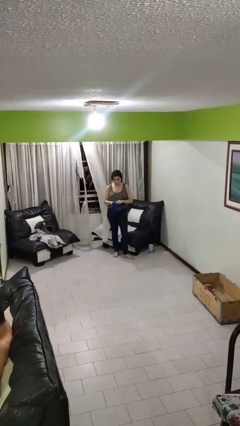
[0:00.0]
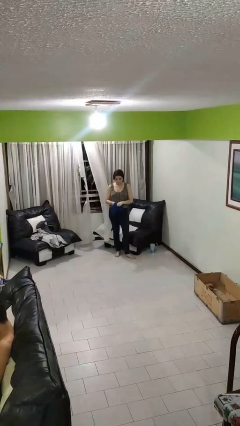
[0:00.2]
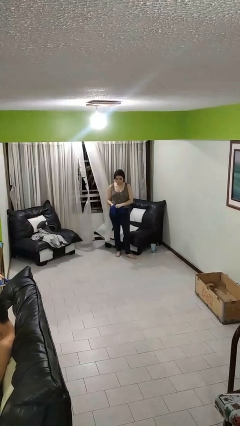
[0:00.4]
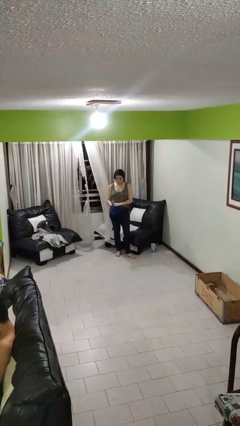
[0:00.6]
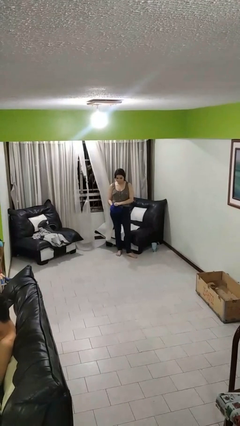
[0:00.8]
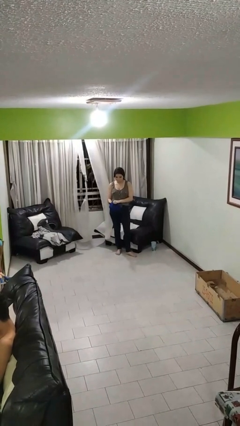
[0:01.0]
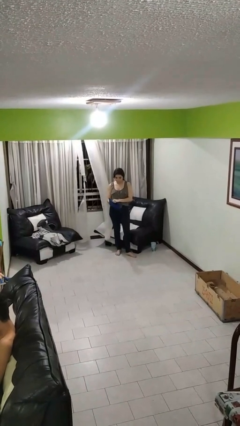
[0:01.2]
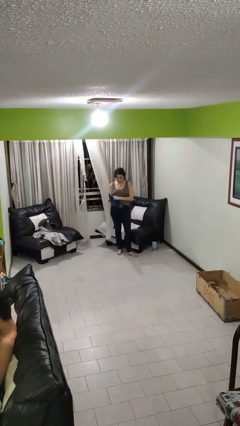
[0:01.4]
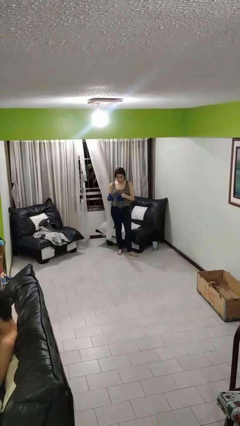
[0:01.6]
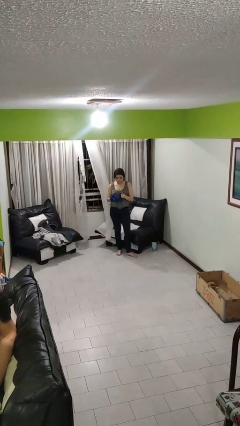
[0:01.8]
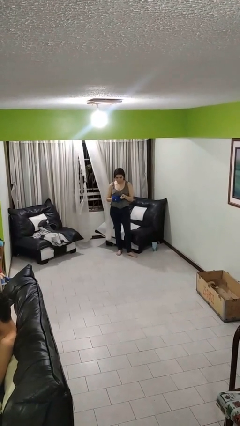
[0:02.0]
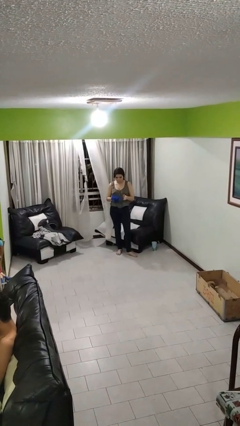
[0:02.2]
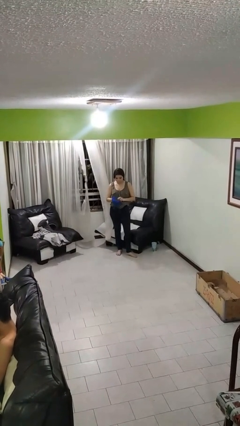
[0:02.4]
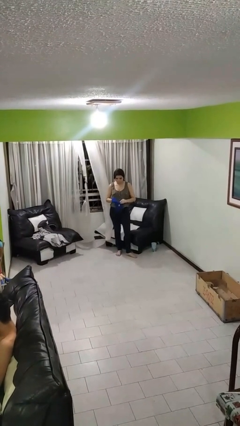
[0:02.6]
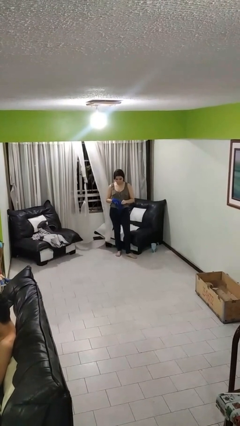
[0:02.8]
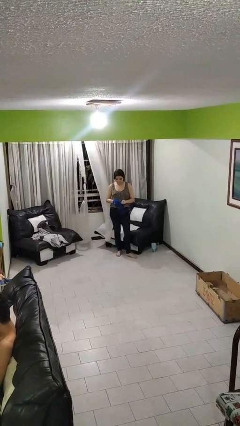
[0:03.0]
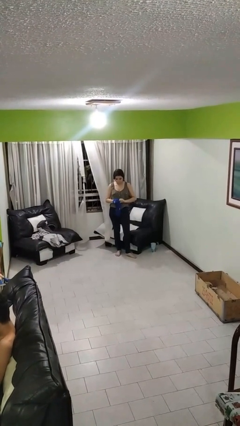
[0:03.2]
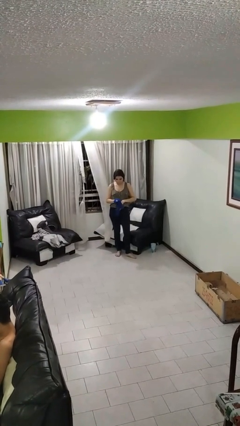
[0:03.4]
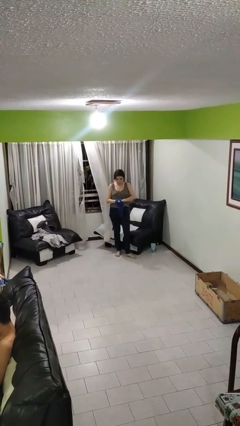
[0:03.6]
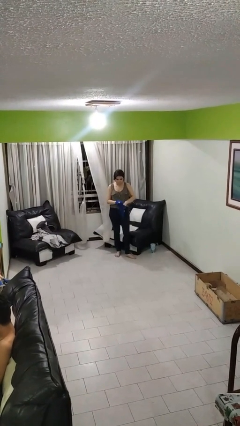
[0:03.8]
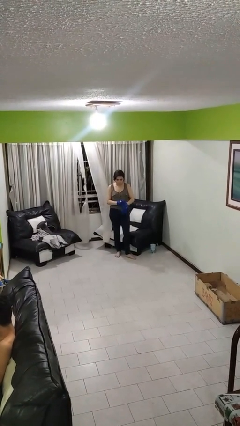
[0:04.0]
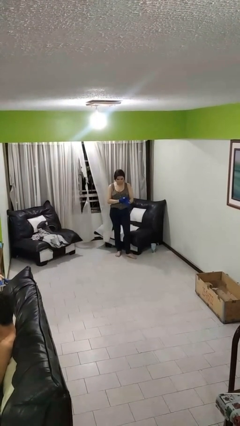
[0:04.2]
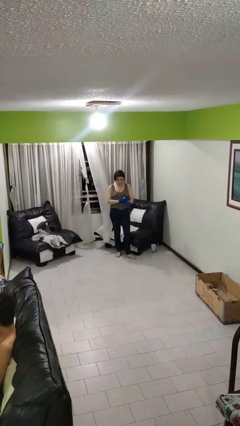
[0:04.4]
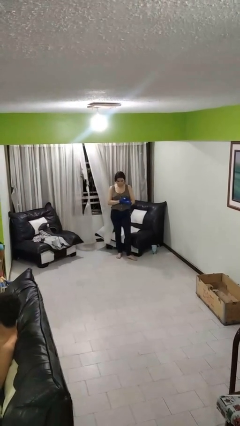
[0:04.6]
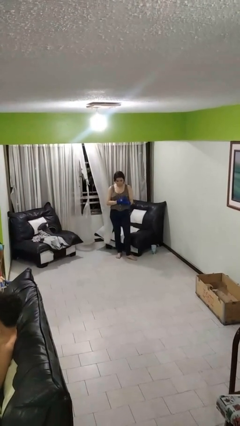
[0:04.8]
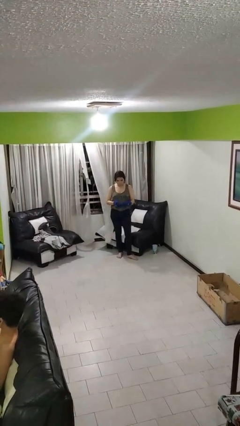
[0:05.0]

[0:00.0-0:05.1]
person puts on gloves

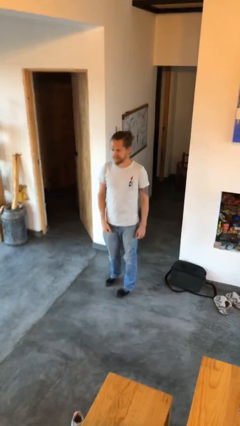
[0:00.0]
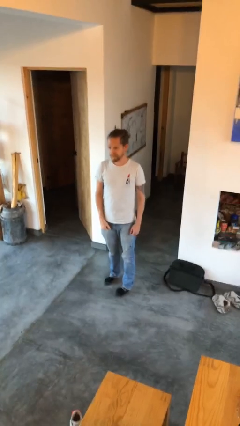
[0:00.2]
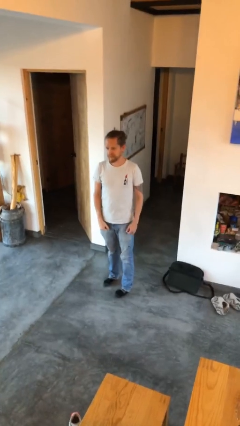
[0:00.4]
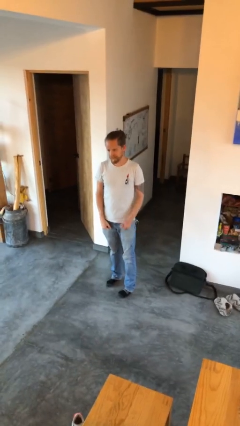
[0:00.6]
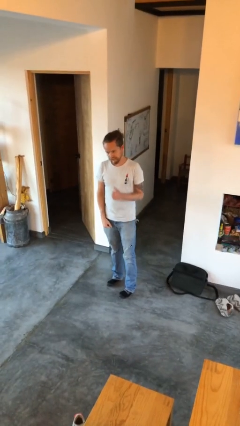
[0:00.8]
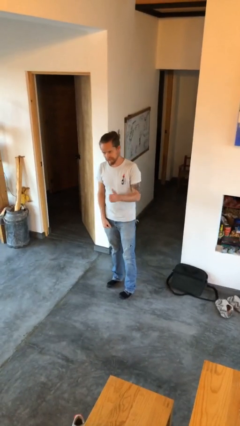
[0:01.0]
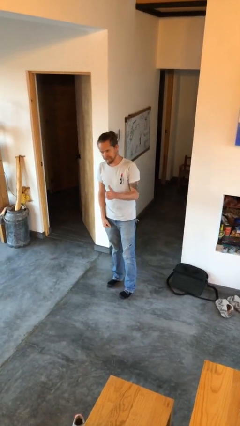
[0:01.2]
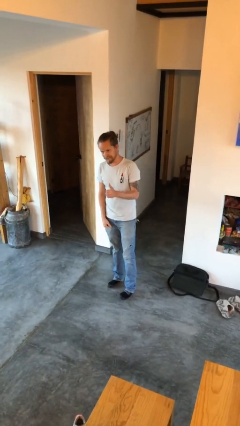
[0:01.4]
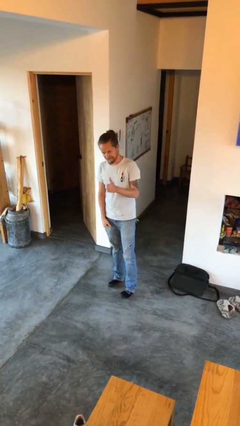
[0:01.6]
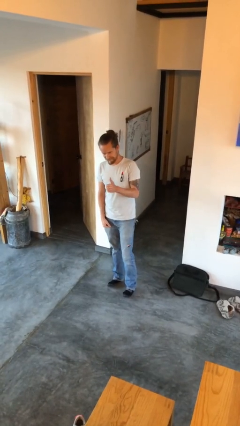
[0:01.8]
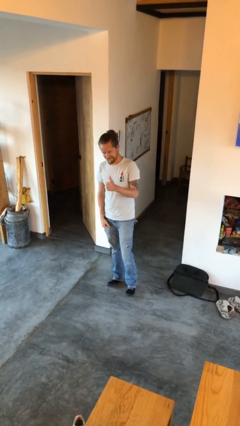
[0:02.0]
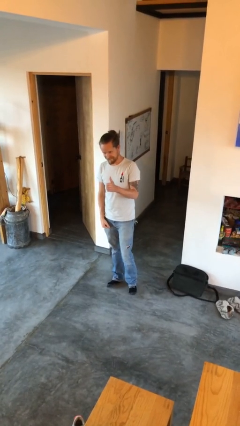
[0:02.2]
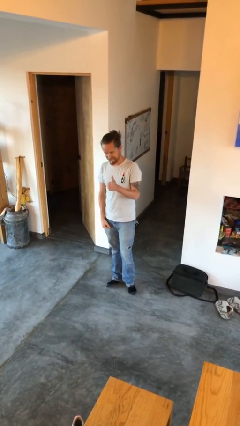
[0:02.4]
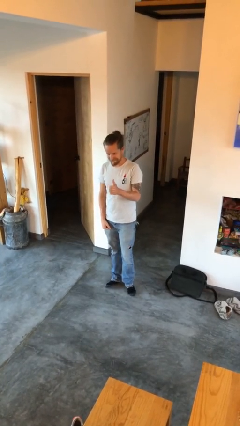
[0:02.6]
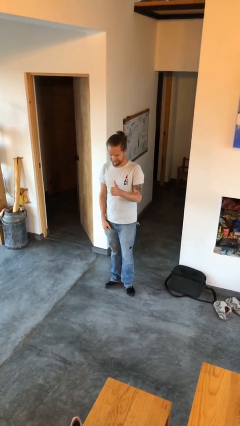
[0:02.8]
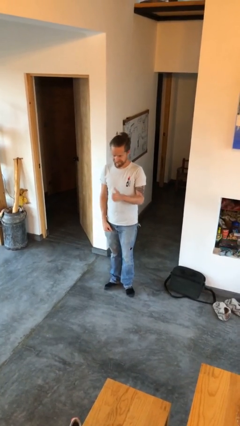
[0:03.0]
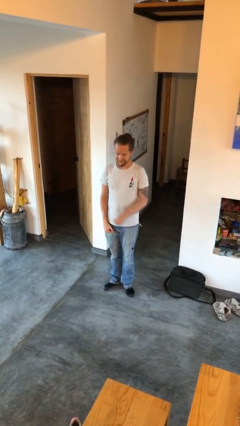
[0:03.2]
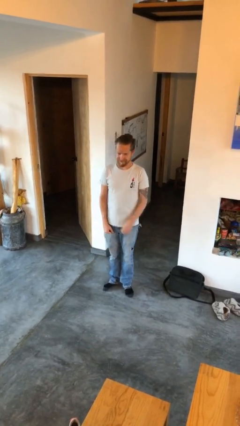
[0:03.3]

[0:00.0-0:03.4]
person gestures thumbs up

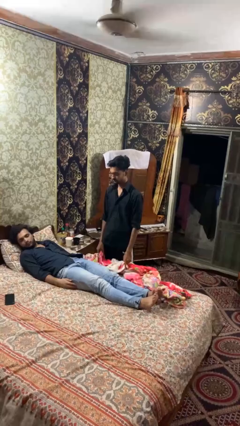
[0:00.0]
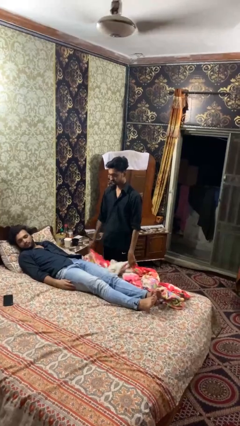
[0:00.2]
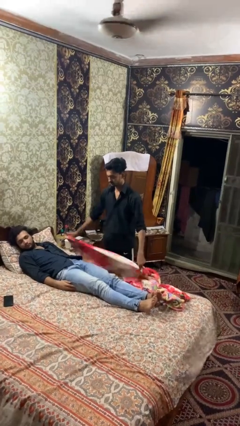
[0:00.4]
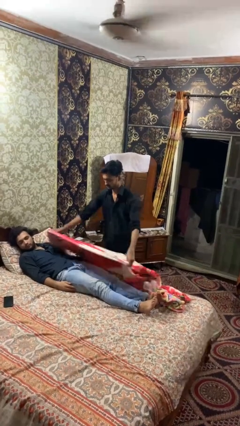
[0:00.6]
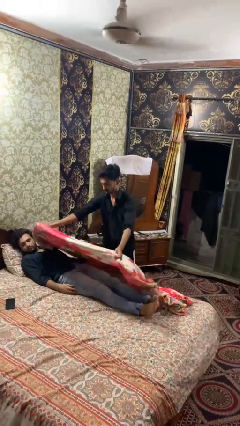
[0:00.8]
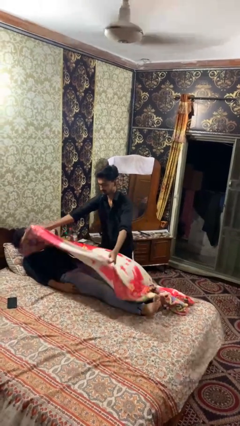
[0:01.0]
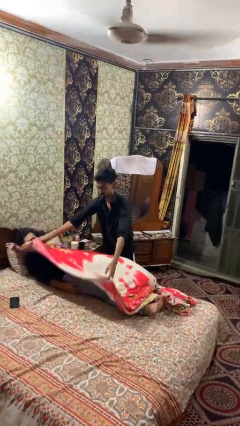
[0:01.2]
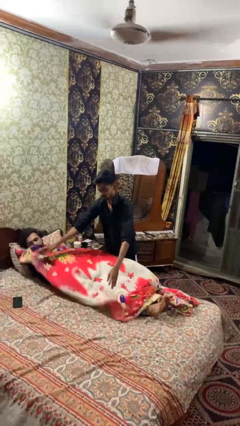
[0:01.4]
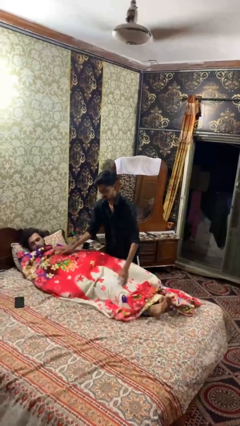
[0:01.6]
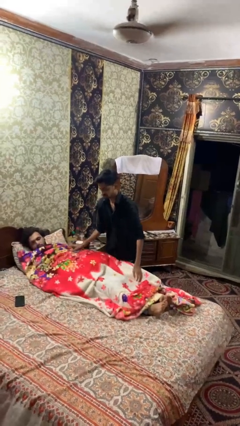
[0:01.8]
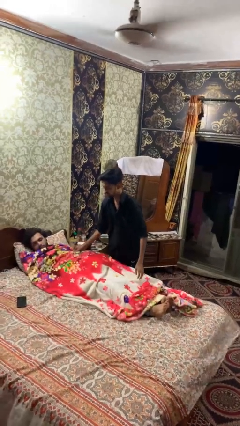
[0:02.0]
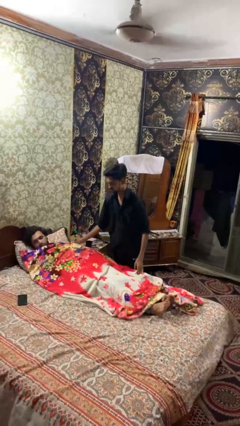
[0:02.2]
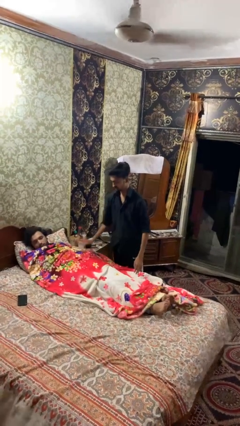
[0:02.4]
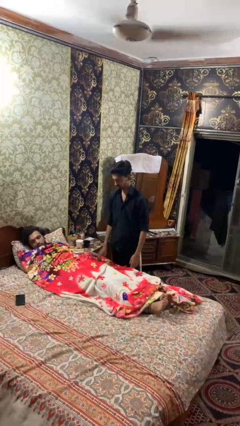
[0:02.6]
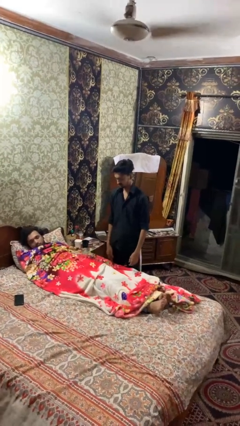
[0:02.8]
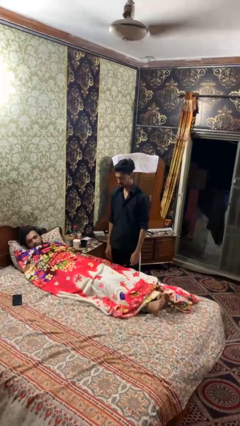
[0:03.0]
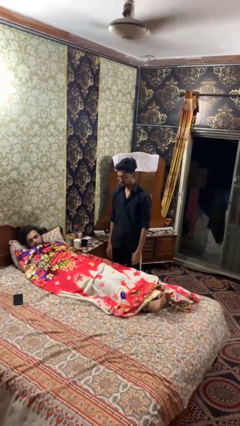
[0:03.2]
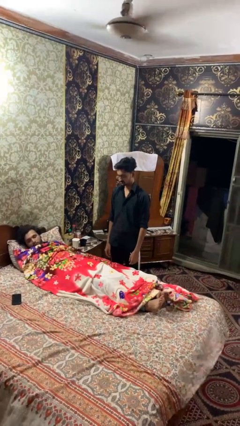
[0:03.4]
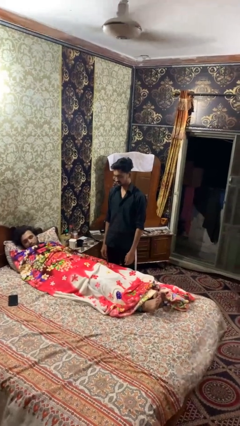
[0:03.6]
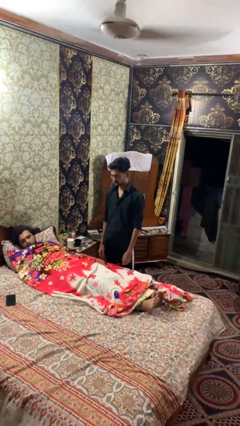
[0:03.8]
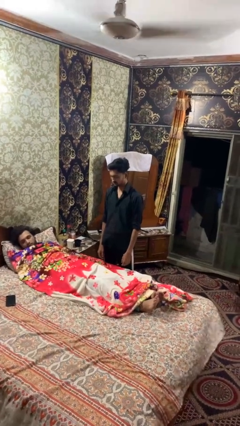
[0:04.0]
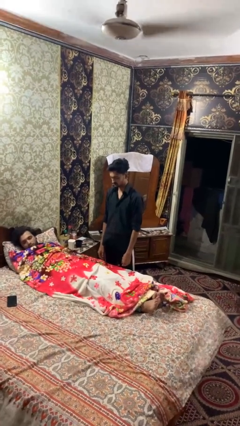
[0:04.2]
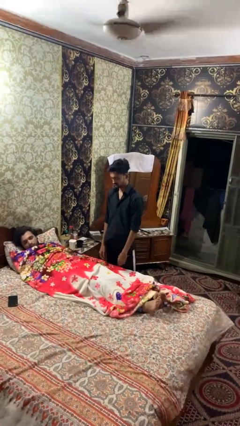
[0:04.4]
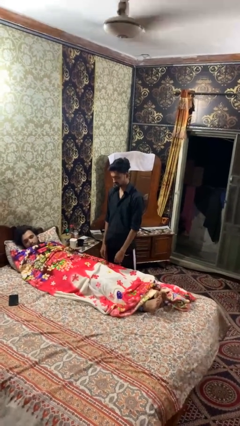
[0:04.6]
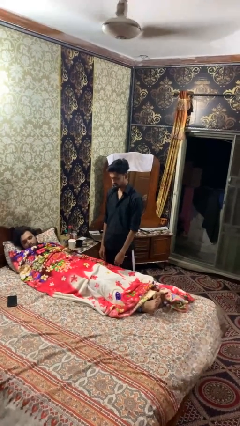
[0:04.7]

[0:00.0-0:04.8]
person covers friend with blanket

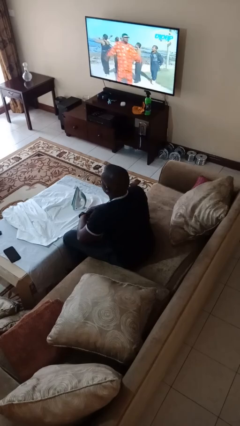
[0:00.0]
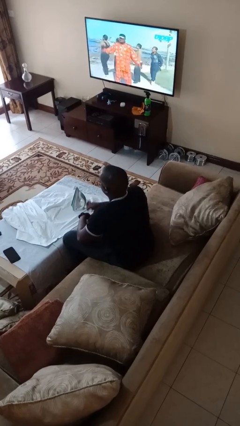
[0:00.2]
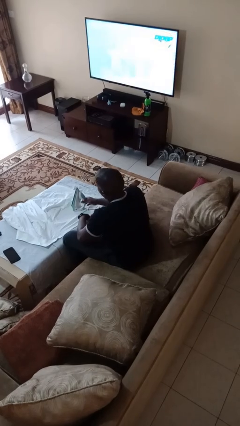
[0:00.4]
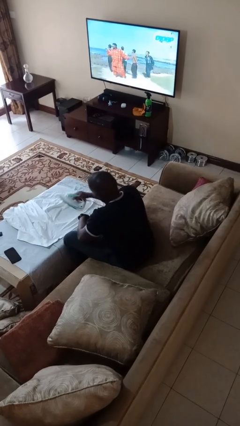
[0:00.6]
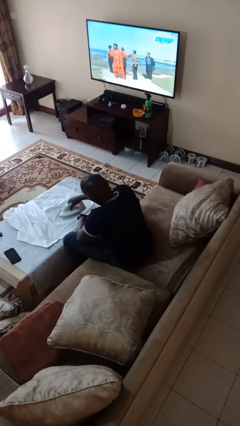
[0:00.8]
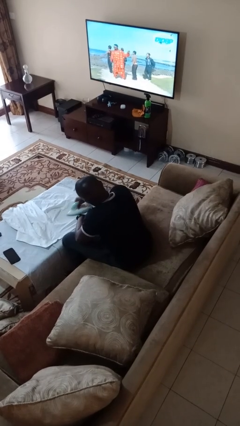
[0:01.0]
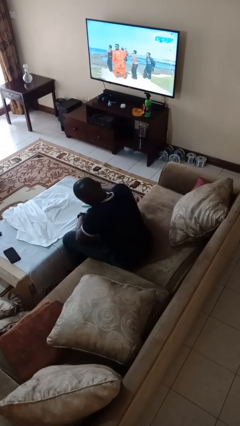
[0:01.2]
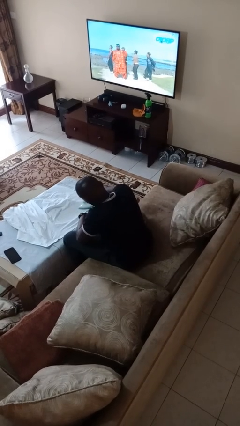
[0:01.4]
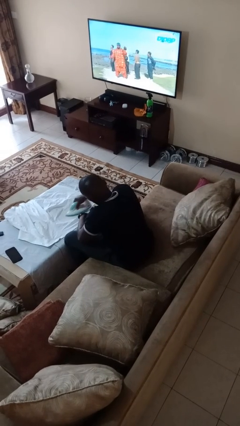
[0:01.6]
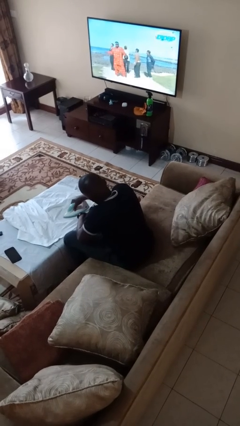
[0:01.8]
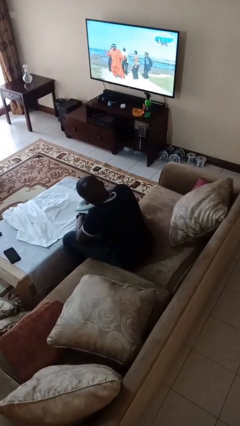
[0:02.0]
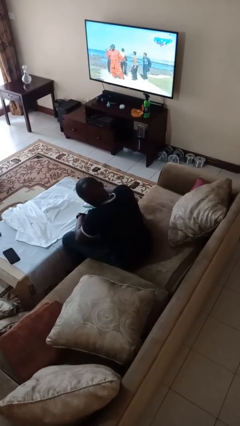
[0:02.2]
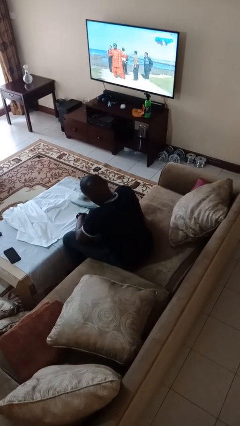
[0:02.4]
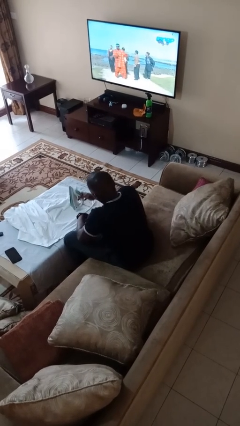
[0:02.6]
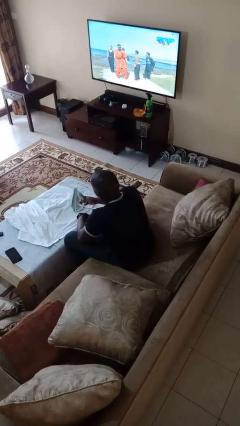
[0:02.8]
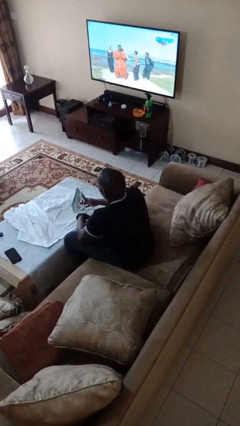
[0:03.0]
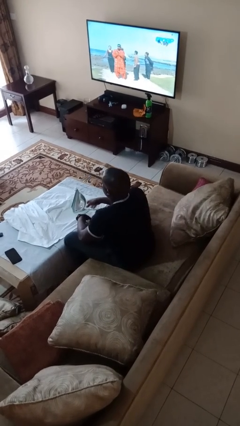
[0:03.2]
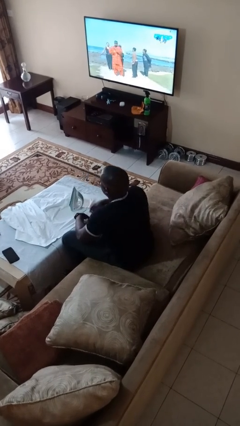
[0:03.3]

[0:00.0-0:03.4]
person irons clothes

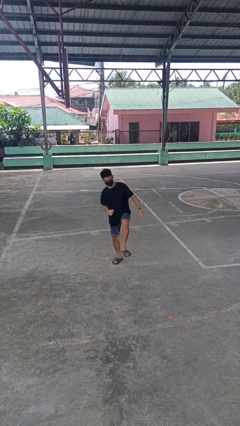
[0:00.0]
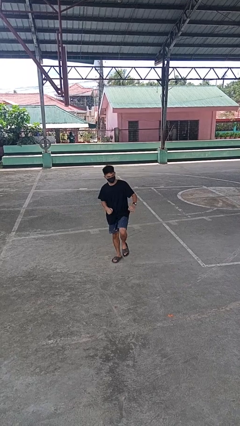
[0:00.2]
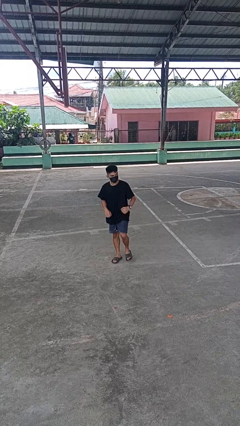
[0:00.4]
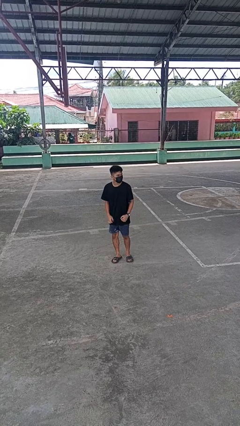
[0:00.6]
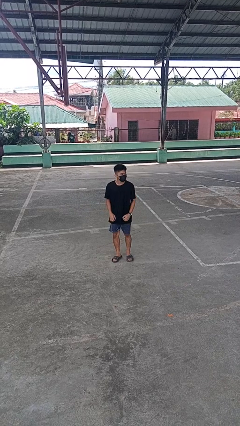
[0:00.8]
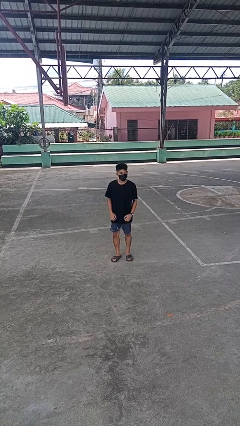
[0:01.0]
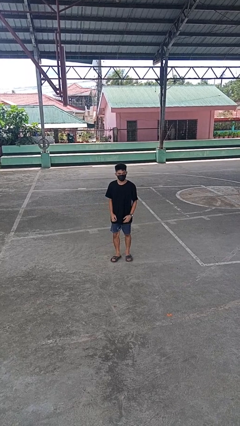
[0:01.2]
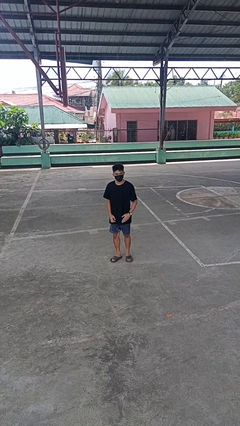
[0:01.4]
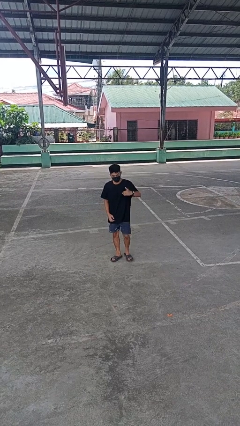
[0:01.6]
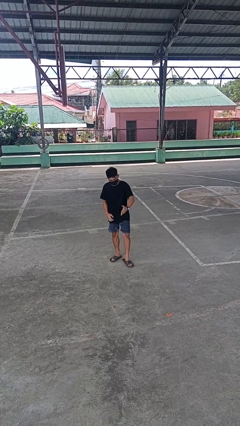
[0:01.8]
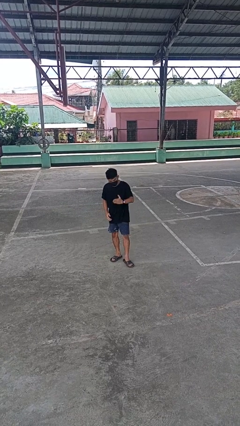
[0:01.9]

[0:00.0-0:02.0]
person karate kicks
